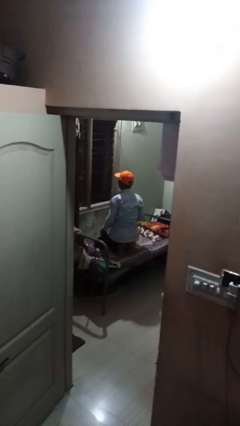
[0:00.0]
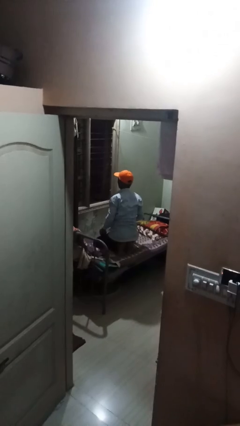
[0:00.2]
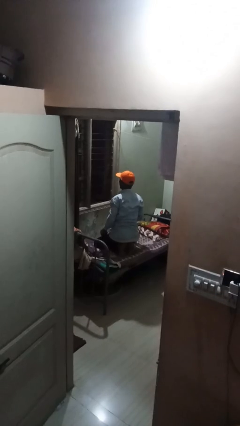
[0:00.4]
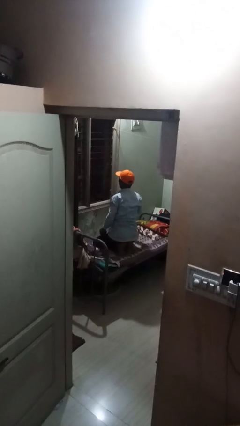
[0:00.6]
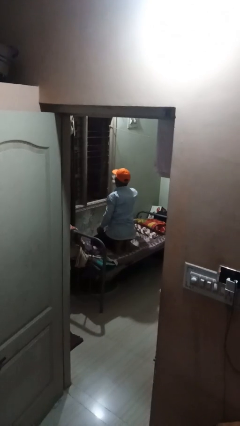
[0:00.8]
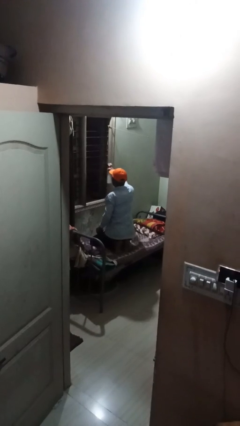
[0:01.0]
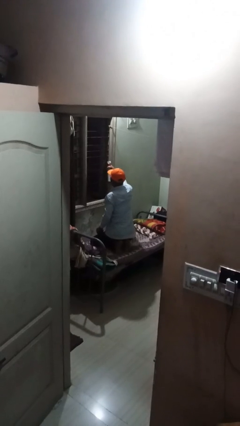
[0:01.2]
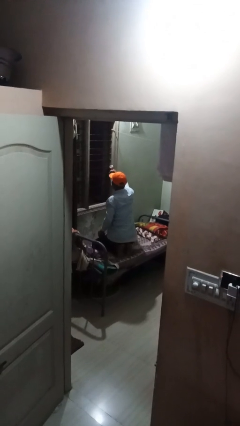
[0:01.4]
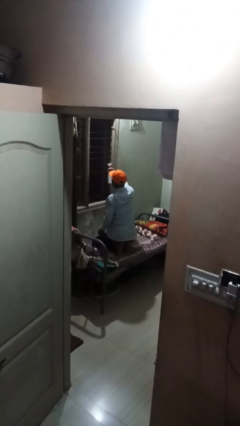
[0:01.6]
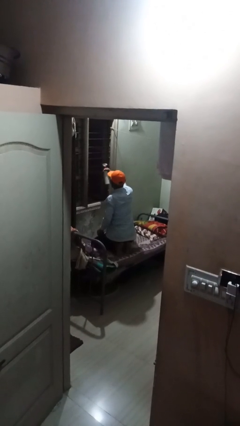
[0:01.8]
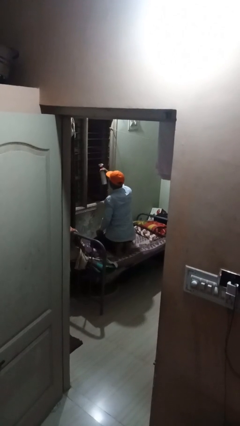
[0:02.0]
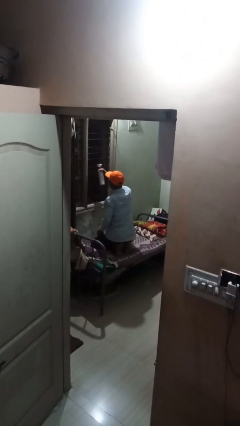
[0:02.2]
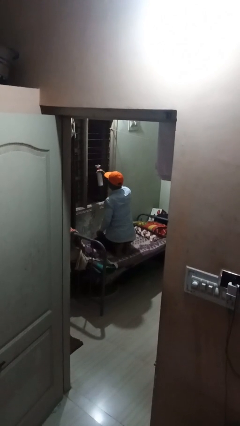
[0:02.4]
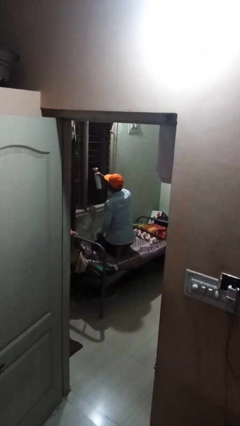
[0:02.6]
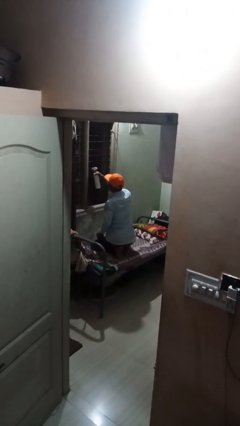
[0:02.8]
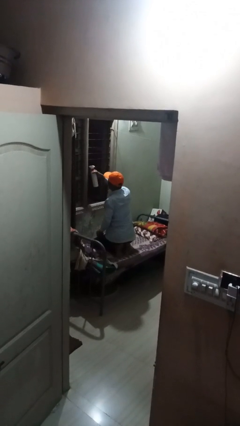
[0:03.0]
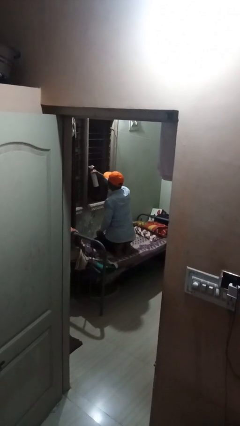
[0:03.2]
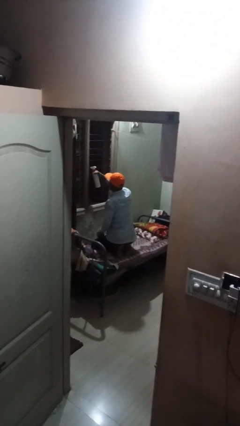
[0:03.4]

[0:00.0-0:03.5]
person sprays from bottle

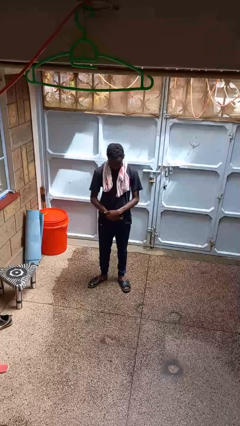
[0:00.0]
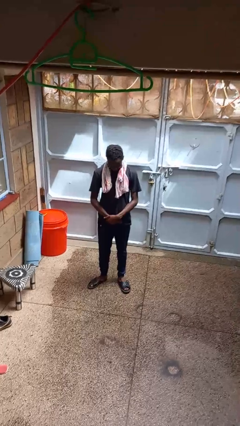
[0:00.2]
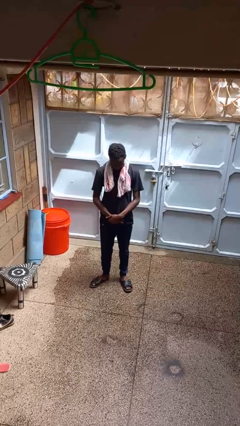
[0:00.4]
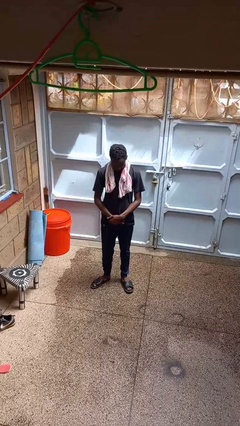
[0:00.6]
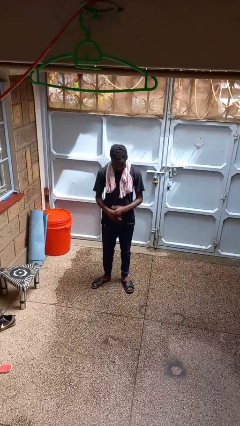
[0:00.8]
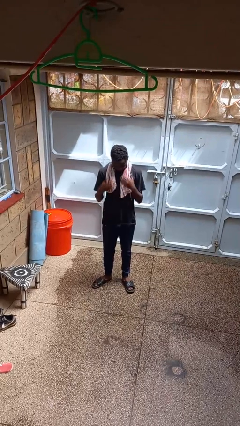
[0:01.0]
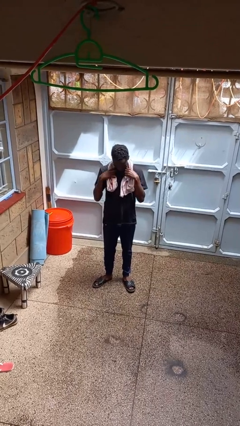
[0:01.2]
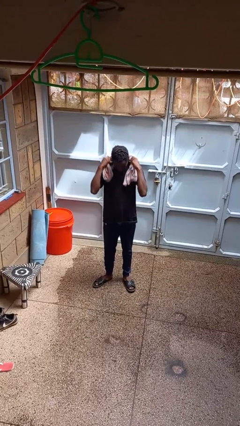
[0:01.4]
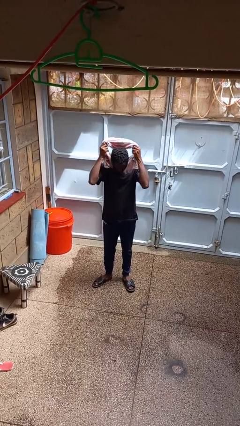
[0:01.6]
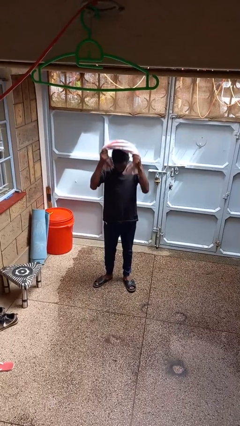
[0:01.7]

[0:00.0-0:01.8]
person takes off scarf

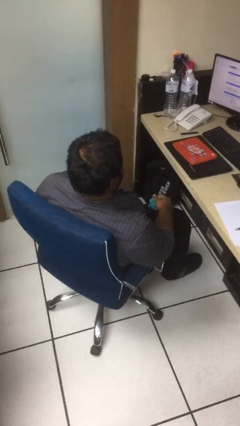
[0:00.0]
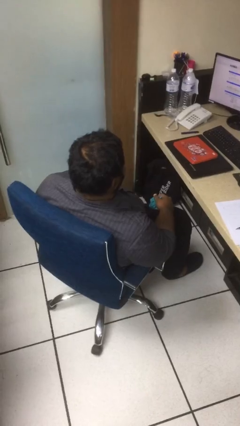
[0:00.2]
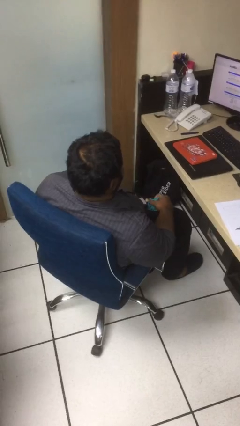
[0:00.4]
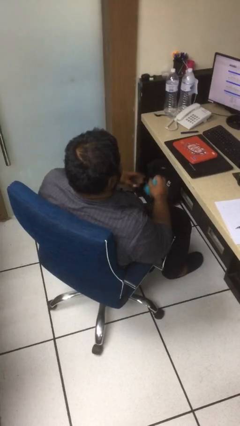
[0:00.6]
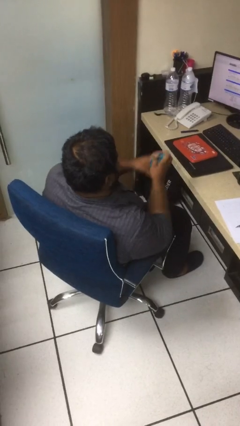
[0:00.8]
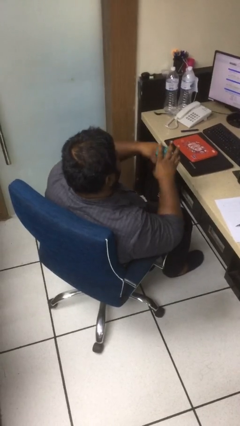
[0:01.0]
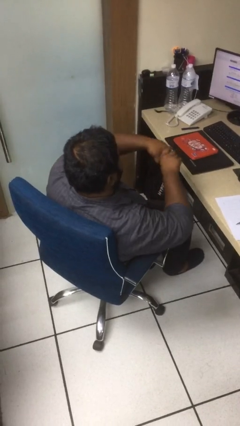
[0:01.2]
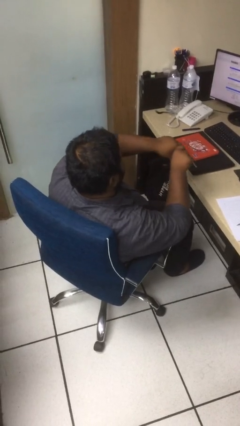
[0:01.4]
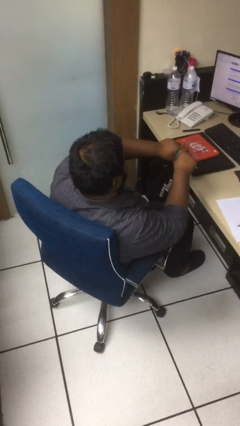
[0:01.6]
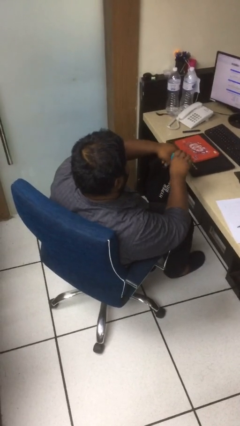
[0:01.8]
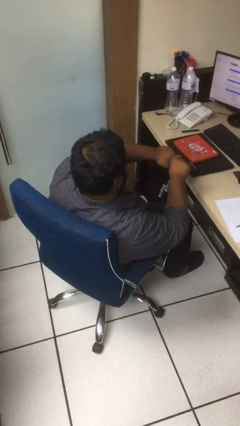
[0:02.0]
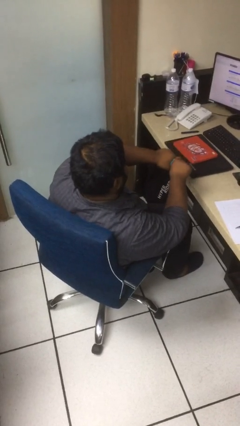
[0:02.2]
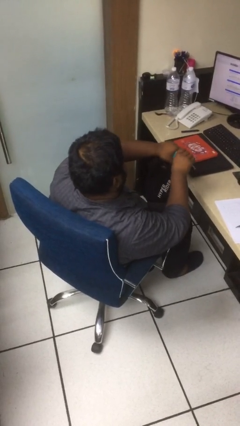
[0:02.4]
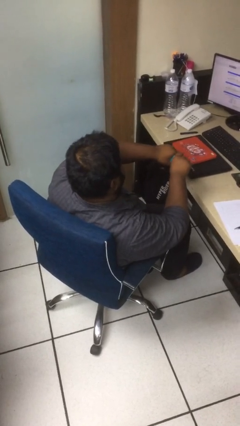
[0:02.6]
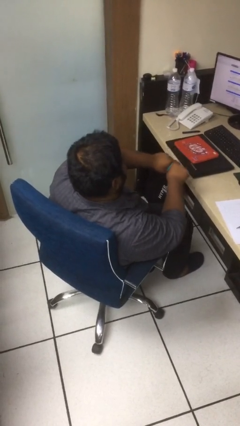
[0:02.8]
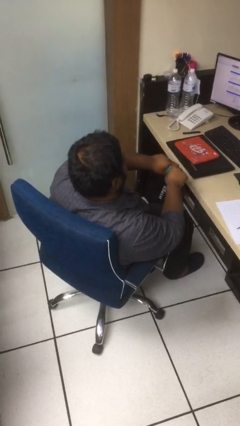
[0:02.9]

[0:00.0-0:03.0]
person squeezes object

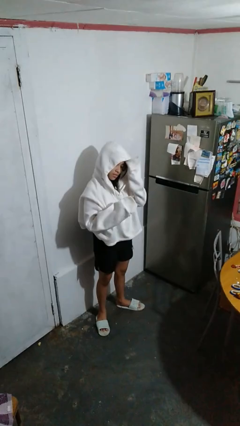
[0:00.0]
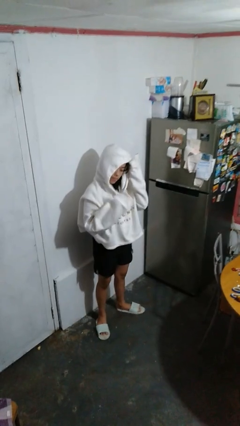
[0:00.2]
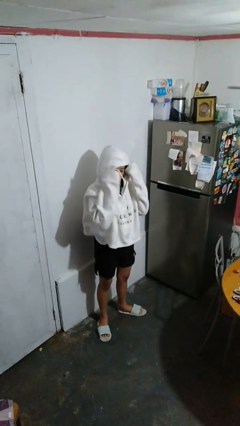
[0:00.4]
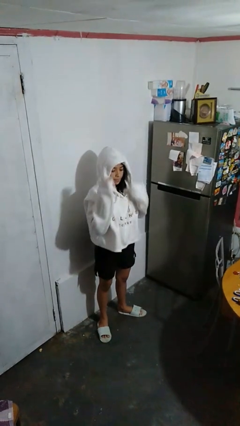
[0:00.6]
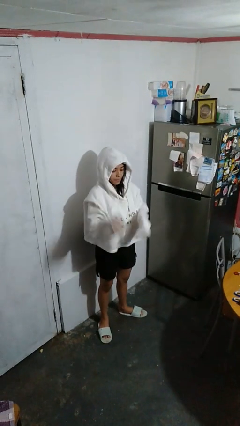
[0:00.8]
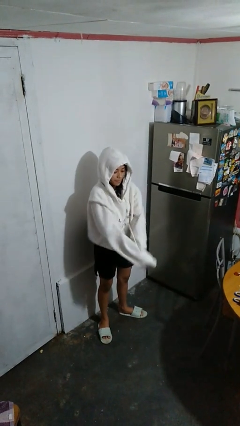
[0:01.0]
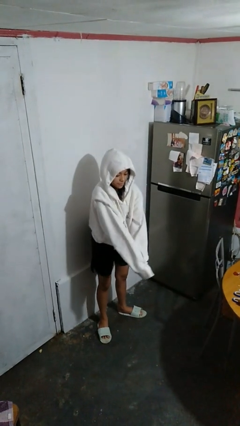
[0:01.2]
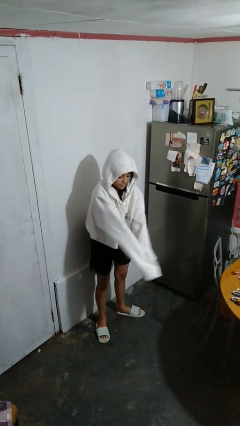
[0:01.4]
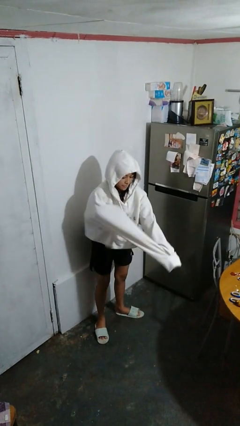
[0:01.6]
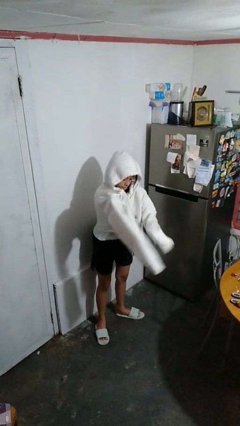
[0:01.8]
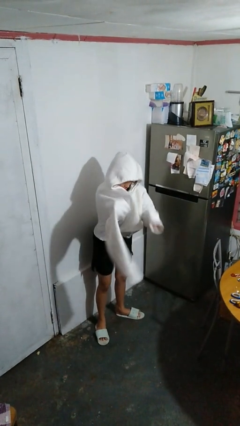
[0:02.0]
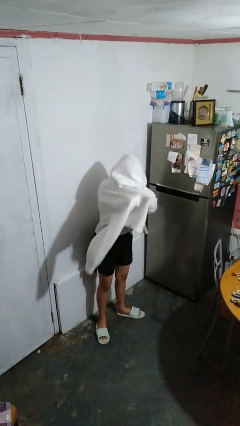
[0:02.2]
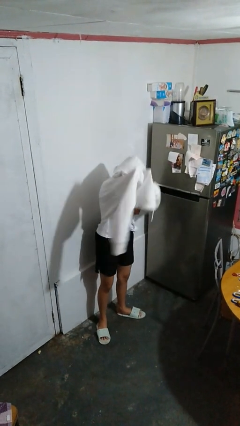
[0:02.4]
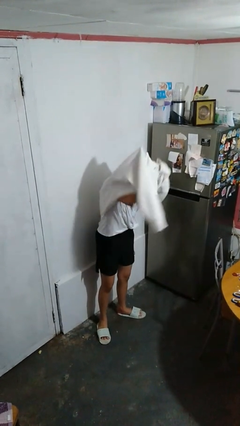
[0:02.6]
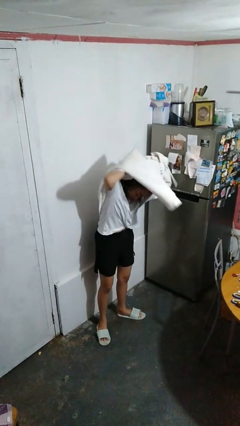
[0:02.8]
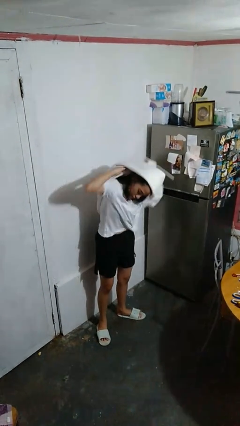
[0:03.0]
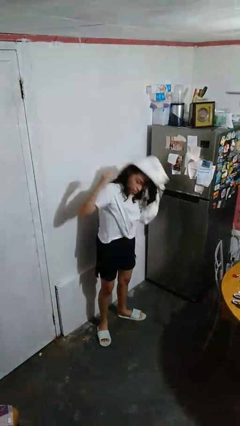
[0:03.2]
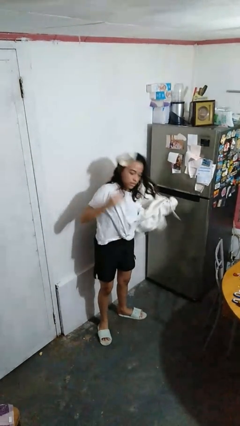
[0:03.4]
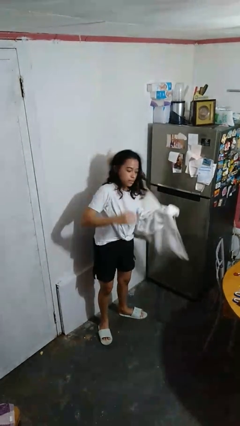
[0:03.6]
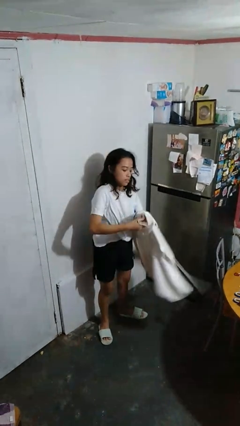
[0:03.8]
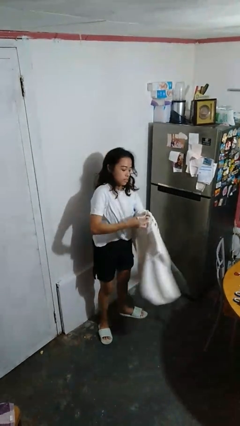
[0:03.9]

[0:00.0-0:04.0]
person takes off hoodie

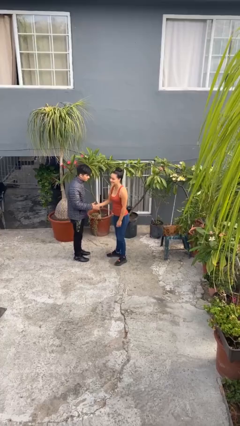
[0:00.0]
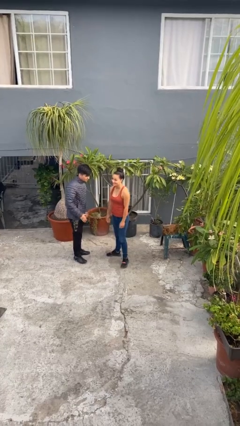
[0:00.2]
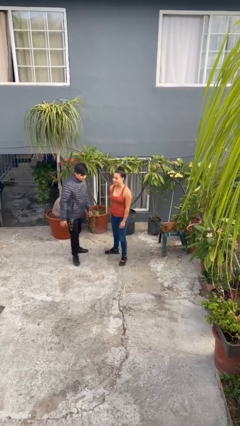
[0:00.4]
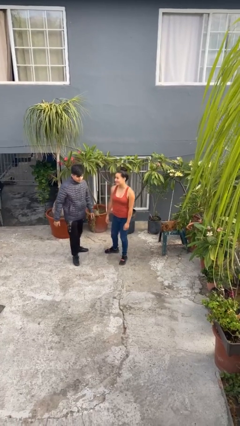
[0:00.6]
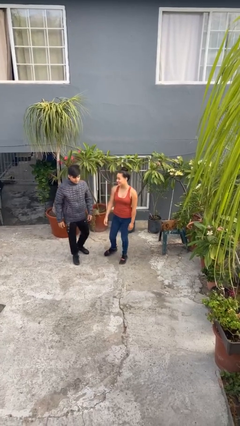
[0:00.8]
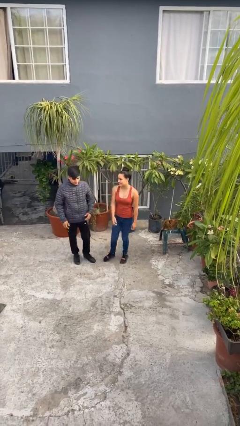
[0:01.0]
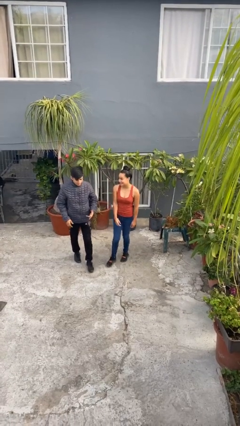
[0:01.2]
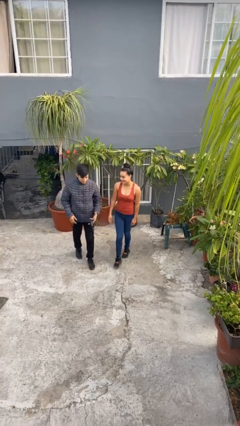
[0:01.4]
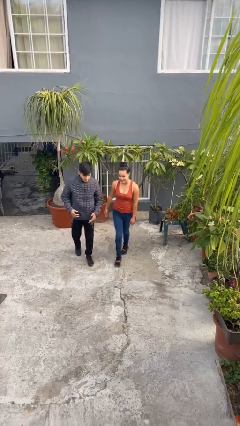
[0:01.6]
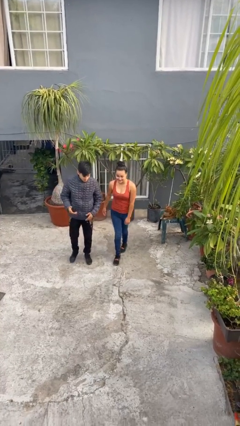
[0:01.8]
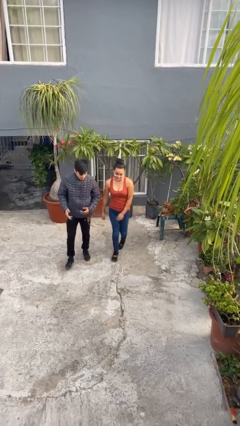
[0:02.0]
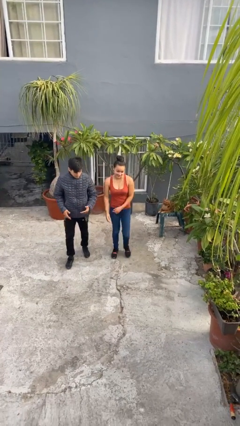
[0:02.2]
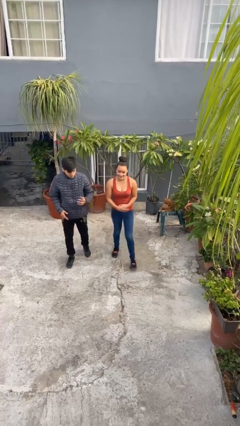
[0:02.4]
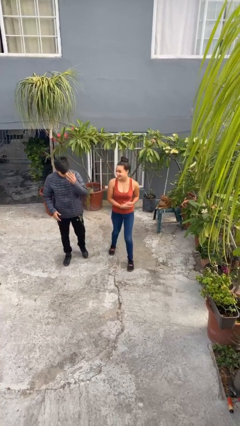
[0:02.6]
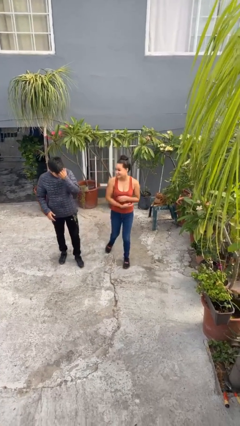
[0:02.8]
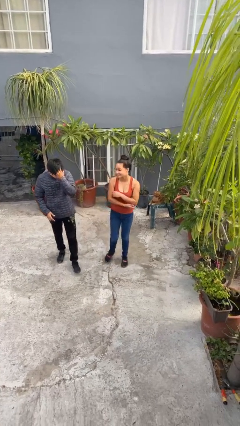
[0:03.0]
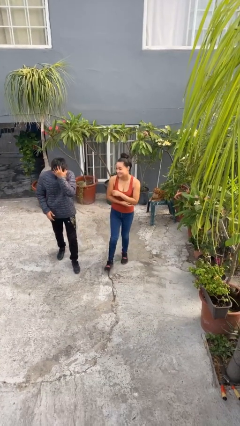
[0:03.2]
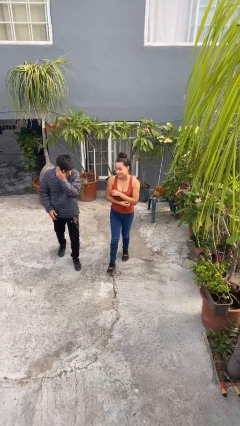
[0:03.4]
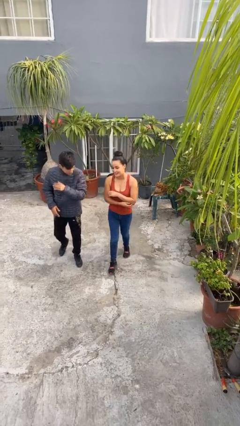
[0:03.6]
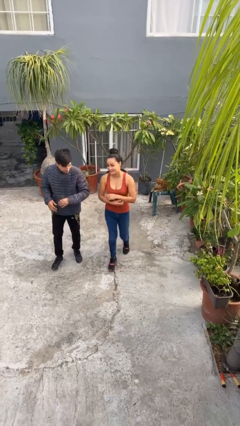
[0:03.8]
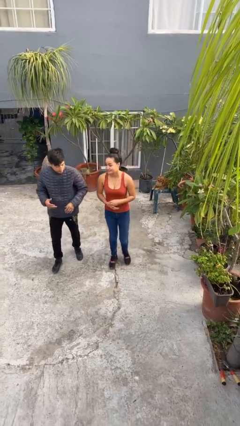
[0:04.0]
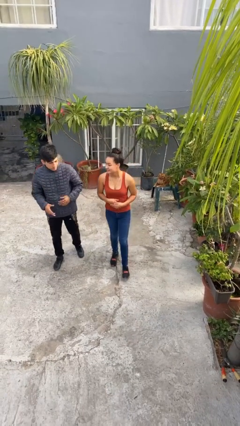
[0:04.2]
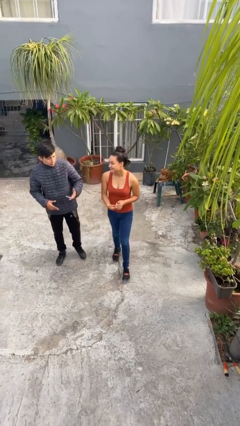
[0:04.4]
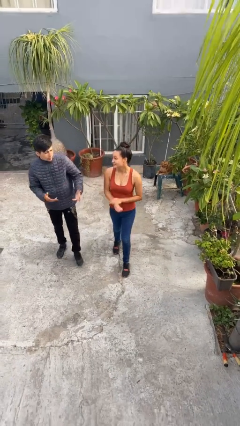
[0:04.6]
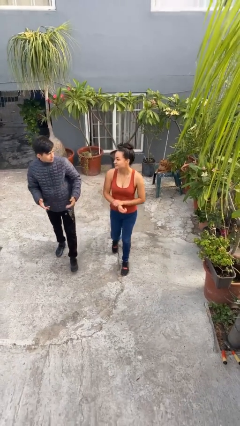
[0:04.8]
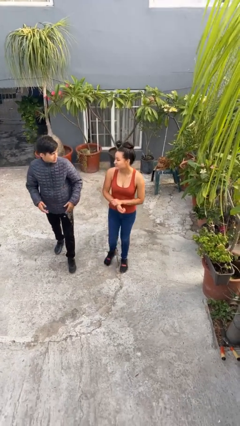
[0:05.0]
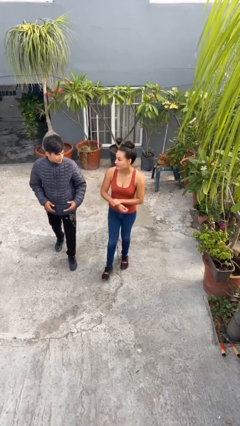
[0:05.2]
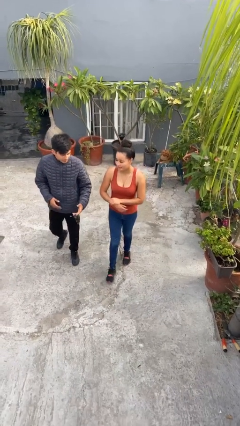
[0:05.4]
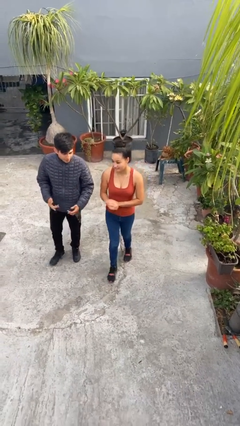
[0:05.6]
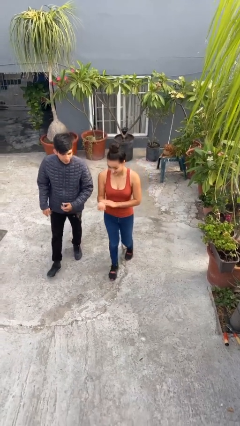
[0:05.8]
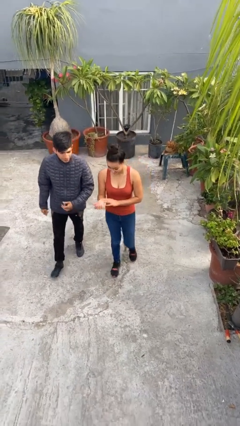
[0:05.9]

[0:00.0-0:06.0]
person talks to person
